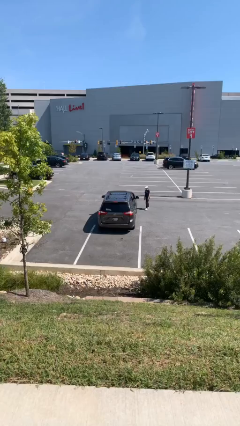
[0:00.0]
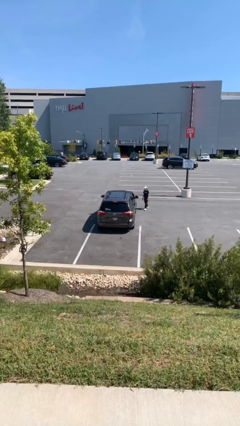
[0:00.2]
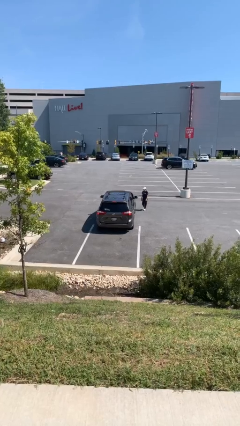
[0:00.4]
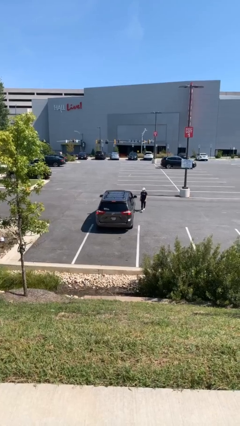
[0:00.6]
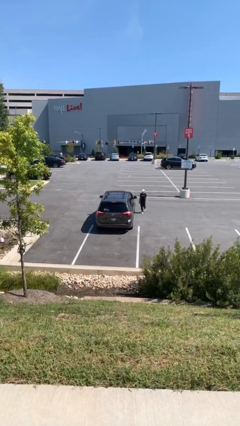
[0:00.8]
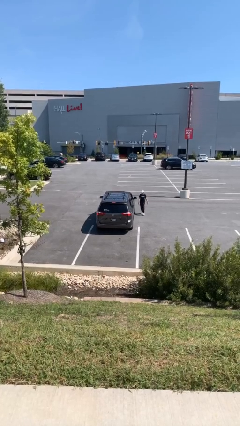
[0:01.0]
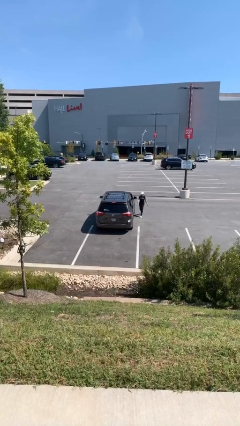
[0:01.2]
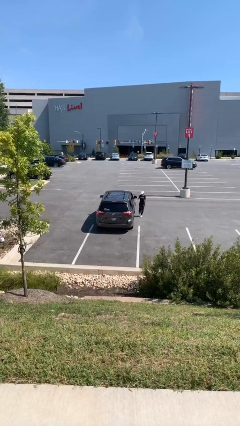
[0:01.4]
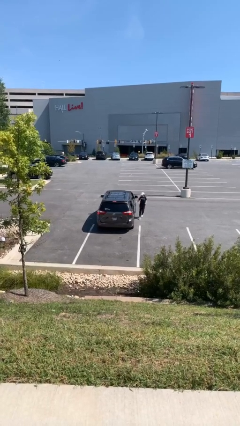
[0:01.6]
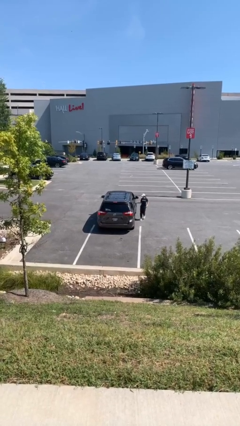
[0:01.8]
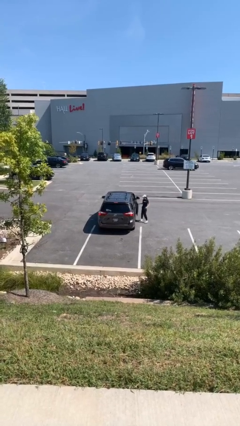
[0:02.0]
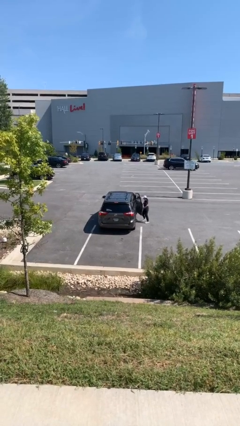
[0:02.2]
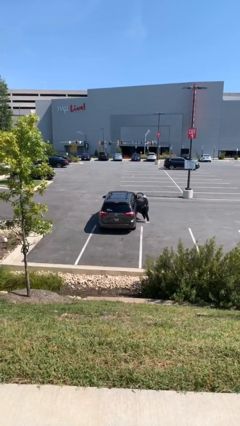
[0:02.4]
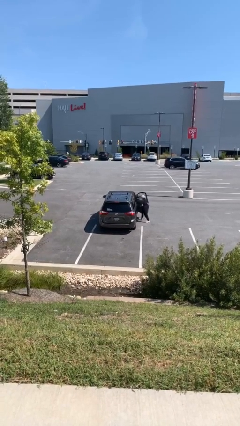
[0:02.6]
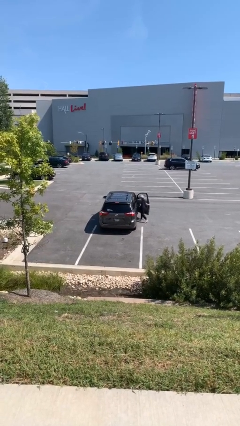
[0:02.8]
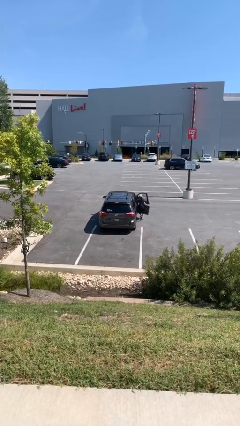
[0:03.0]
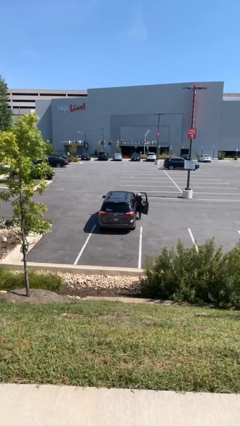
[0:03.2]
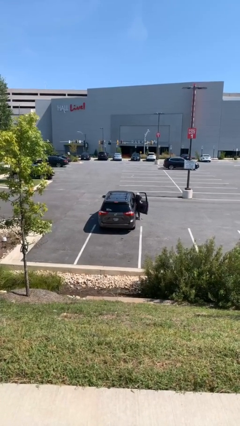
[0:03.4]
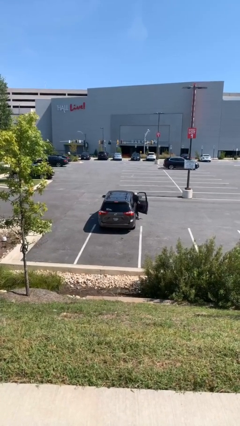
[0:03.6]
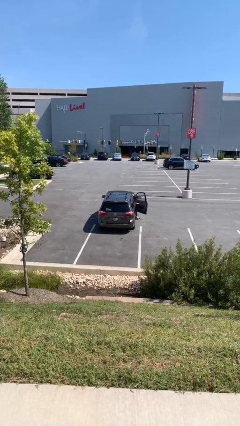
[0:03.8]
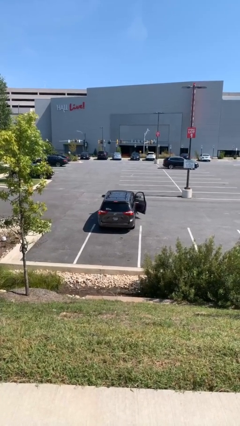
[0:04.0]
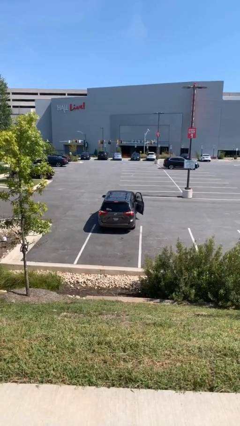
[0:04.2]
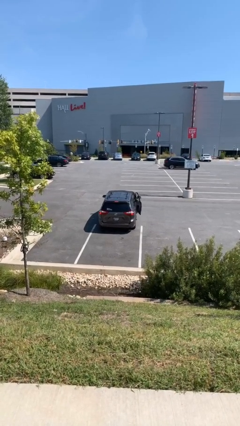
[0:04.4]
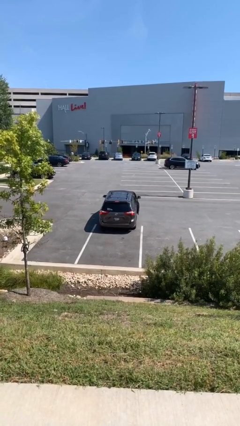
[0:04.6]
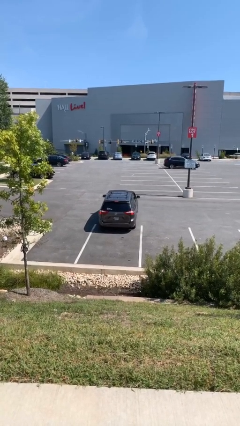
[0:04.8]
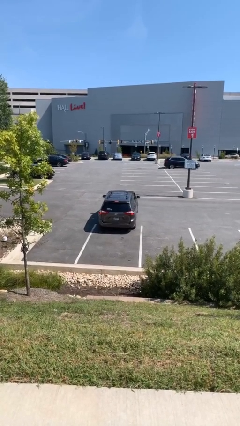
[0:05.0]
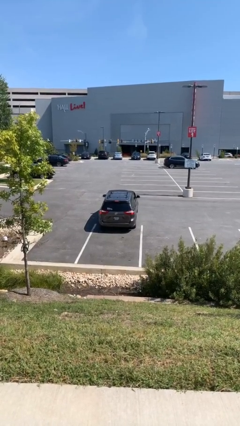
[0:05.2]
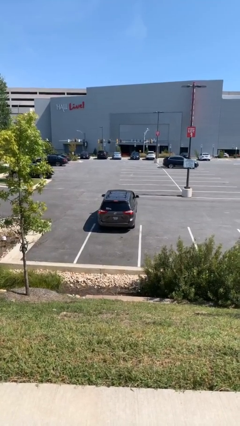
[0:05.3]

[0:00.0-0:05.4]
car picks up person

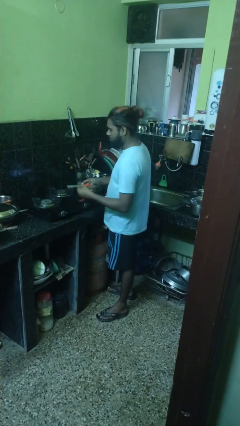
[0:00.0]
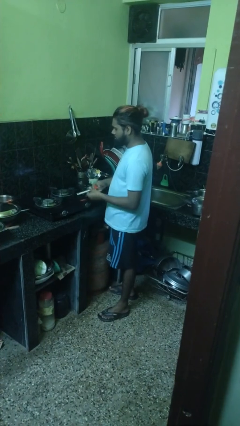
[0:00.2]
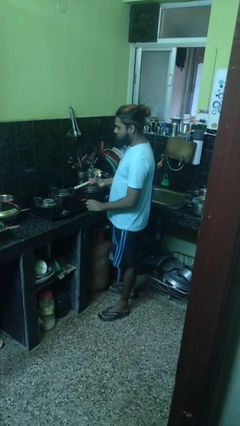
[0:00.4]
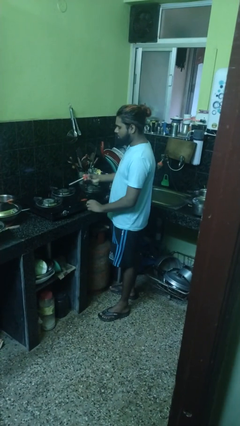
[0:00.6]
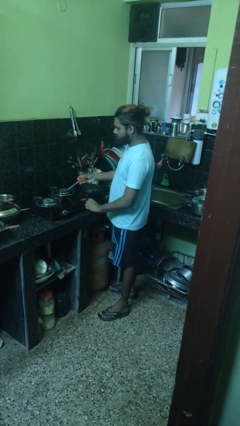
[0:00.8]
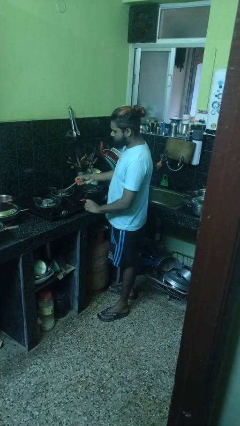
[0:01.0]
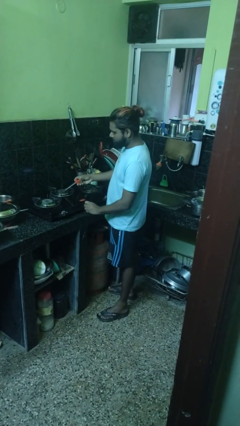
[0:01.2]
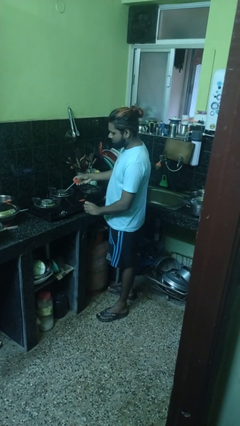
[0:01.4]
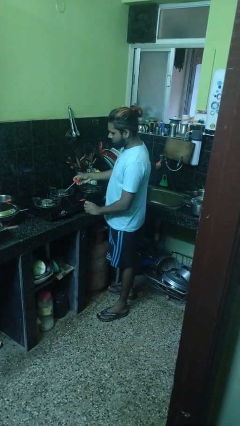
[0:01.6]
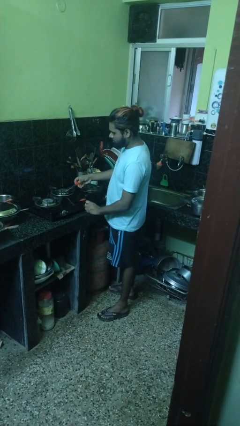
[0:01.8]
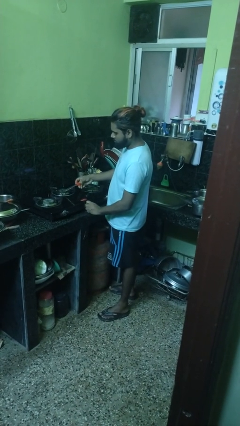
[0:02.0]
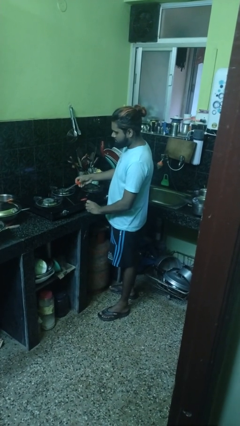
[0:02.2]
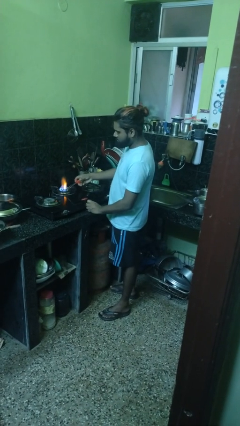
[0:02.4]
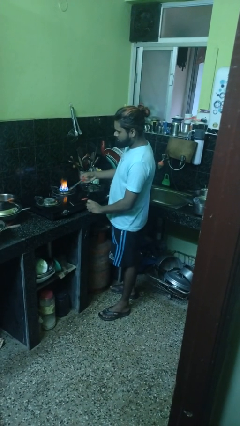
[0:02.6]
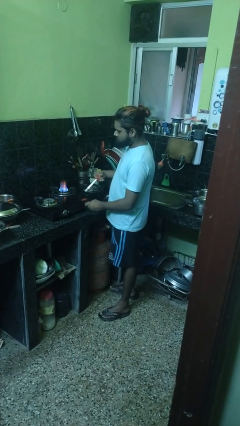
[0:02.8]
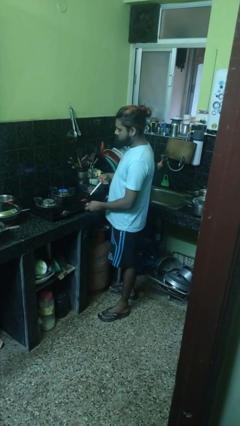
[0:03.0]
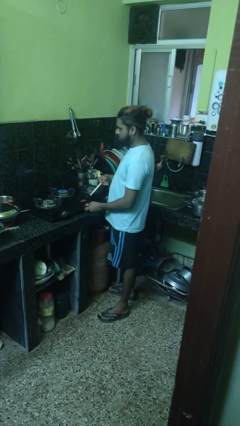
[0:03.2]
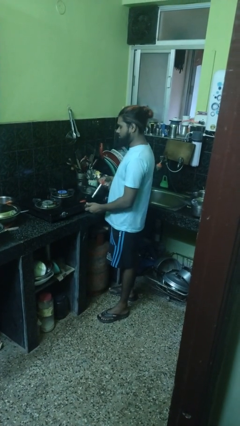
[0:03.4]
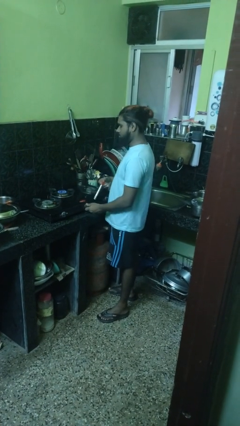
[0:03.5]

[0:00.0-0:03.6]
person turns on stovetop

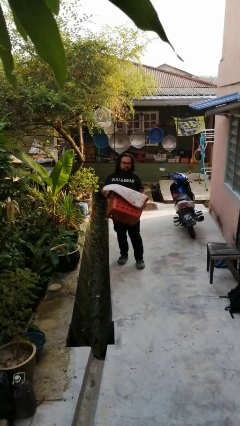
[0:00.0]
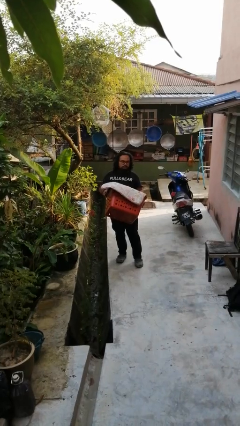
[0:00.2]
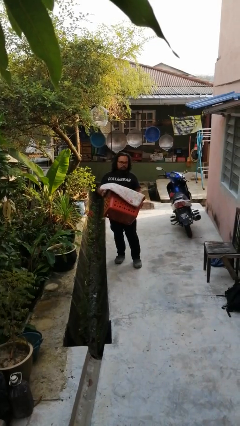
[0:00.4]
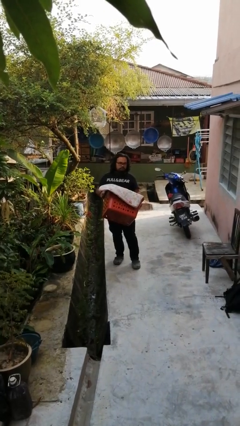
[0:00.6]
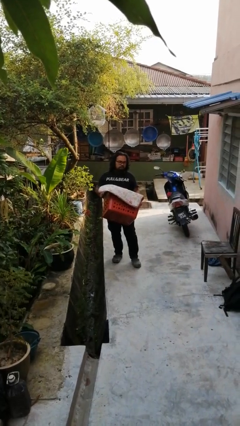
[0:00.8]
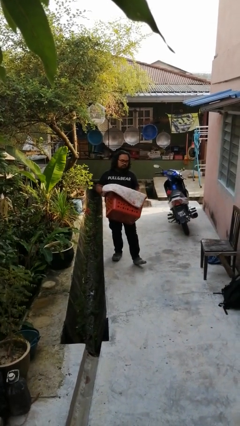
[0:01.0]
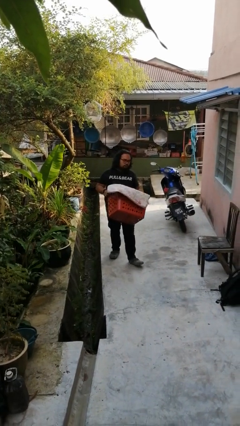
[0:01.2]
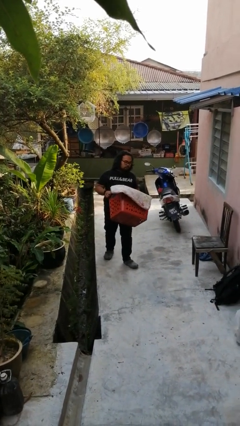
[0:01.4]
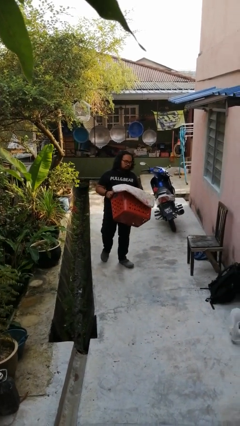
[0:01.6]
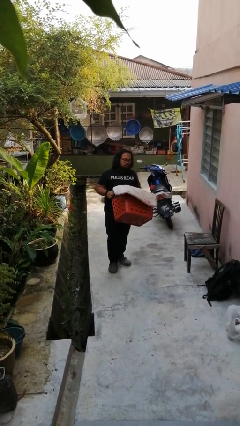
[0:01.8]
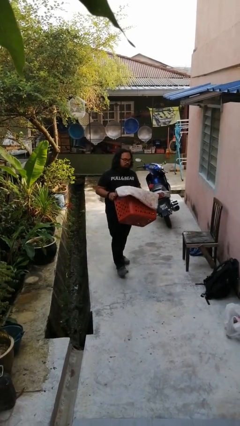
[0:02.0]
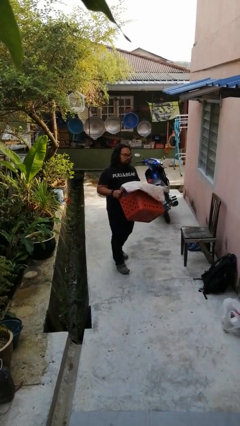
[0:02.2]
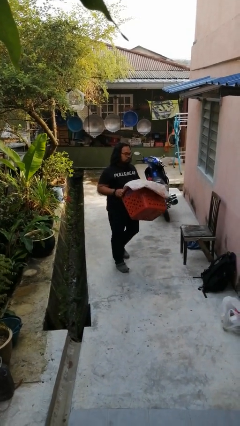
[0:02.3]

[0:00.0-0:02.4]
person carries laundry basket

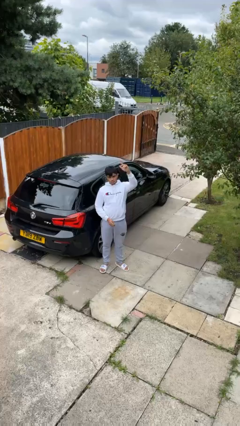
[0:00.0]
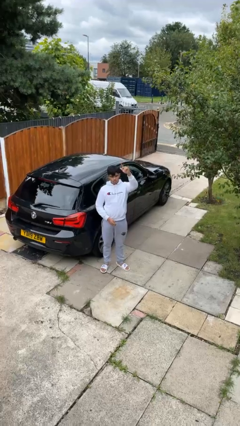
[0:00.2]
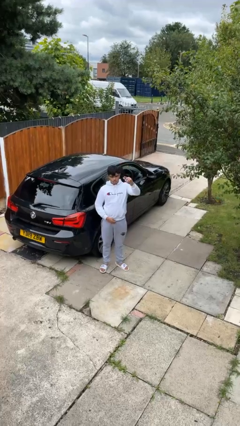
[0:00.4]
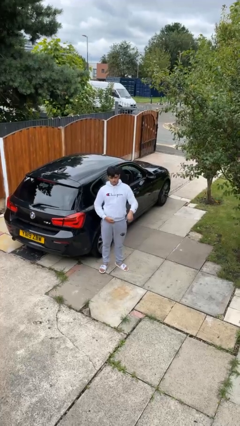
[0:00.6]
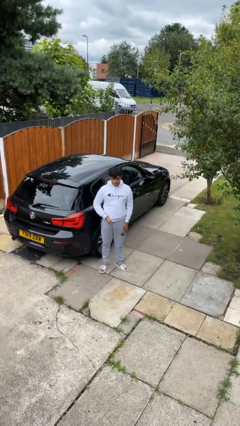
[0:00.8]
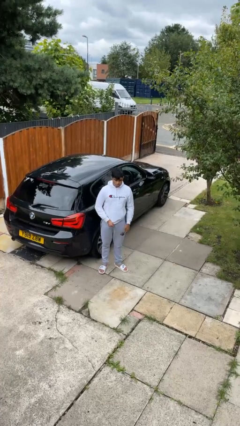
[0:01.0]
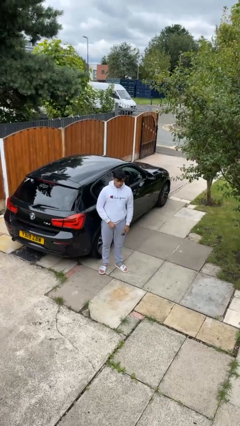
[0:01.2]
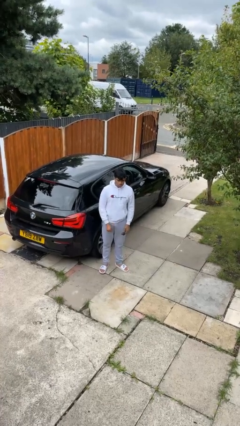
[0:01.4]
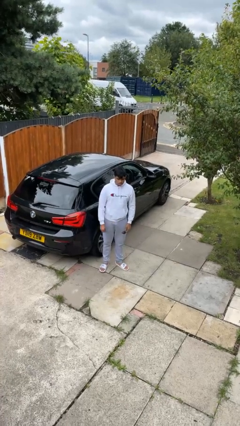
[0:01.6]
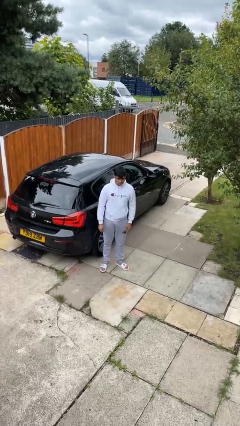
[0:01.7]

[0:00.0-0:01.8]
person gestures lower hand

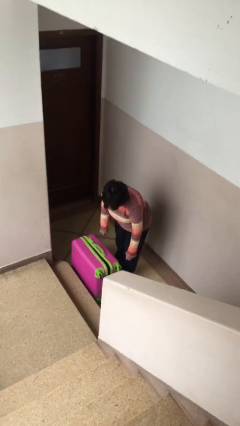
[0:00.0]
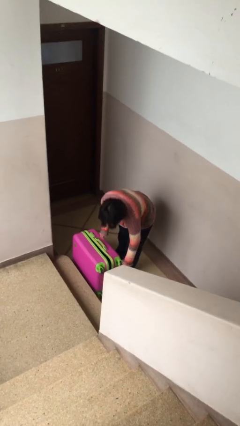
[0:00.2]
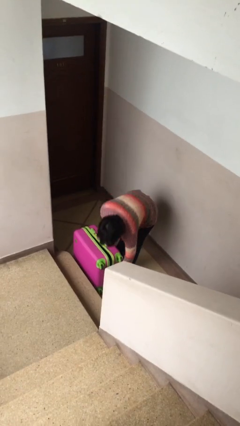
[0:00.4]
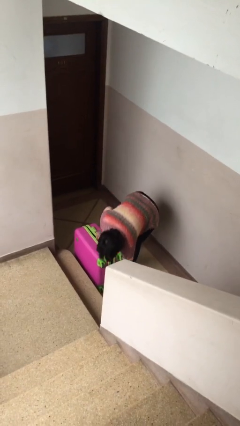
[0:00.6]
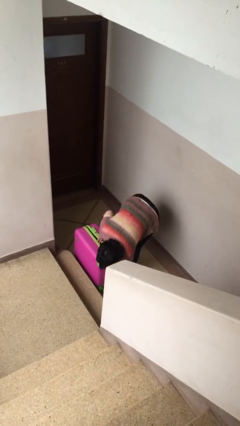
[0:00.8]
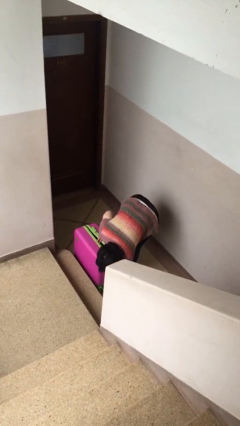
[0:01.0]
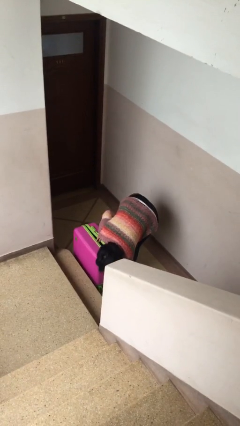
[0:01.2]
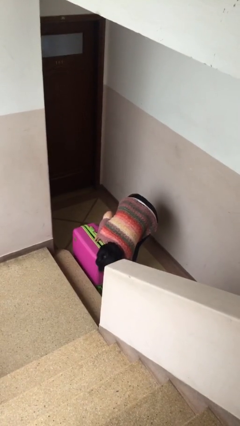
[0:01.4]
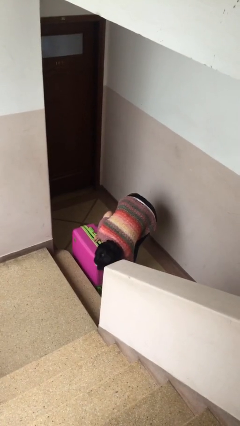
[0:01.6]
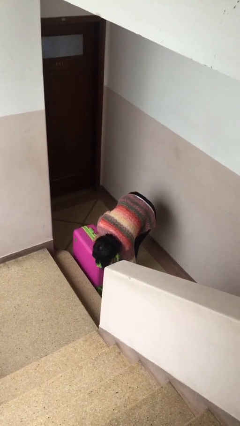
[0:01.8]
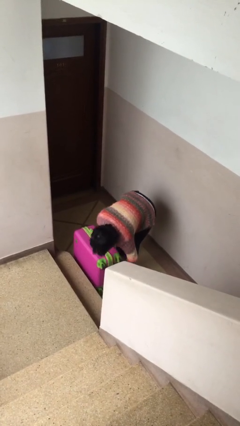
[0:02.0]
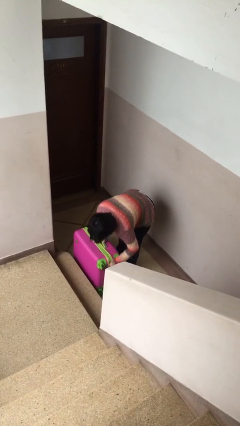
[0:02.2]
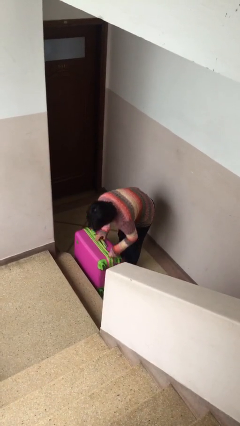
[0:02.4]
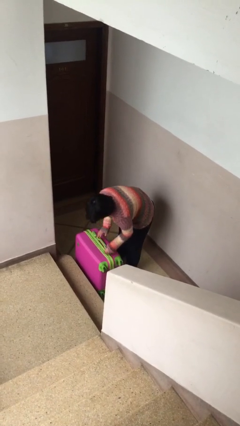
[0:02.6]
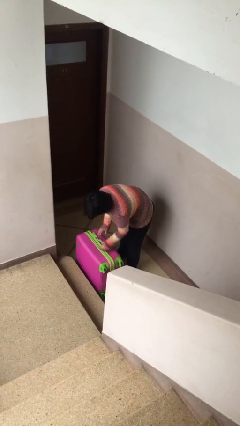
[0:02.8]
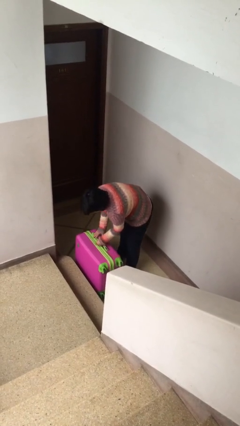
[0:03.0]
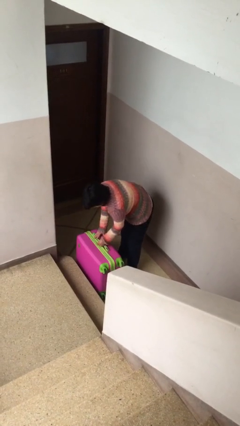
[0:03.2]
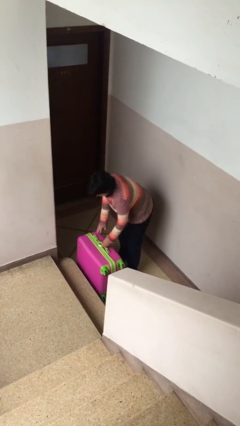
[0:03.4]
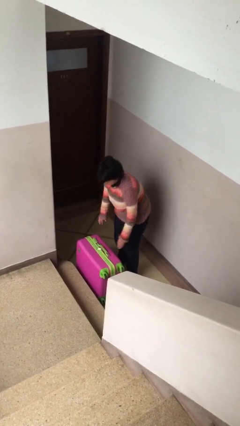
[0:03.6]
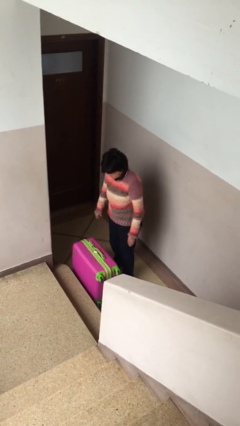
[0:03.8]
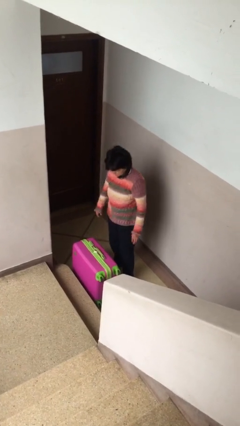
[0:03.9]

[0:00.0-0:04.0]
person closes suitcase

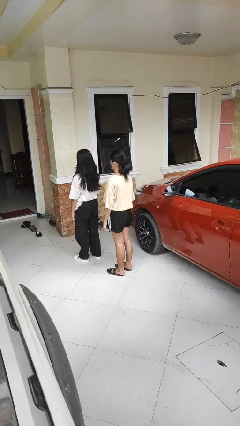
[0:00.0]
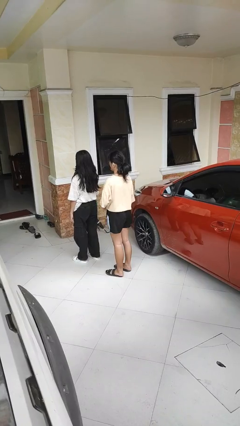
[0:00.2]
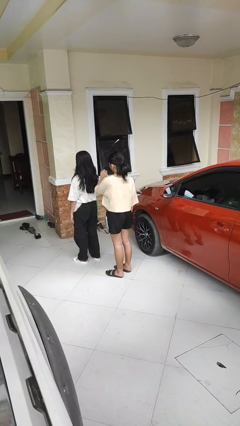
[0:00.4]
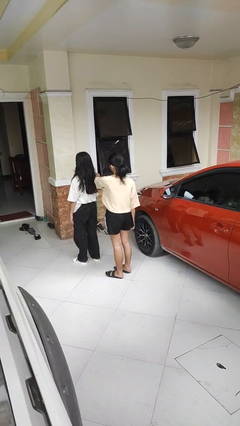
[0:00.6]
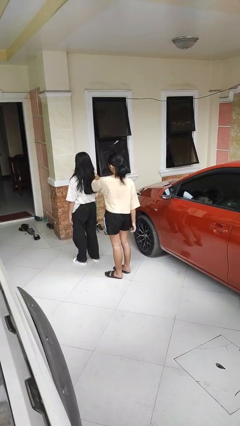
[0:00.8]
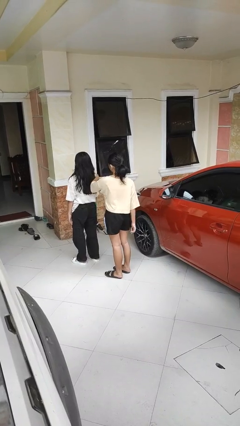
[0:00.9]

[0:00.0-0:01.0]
person grabs person by shoulder
